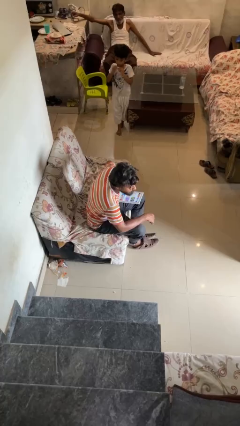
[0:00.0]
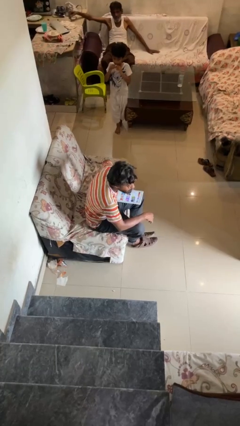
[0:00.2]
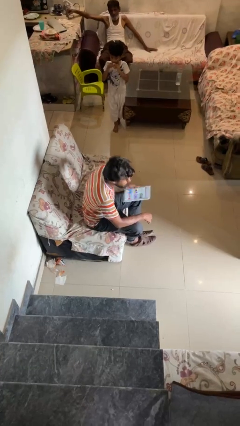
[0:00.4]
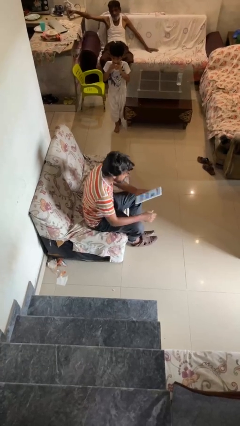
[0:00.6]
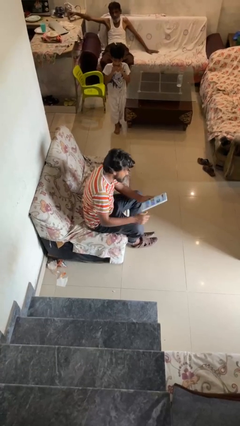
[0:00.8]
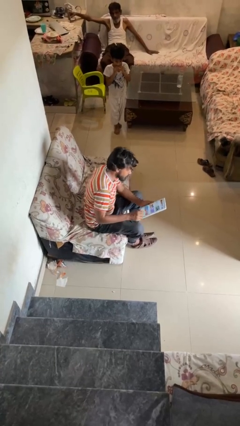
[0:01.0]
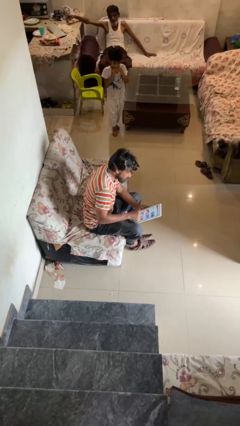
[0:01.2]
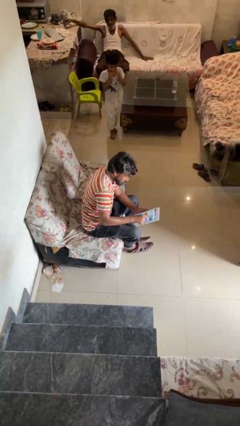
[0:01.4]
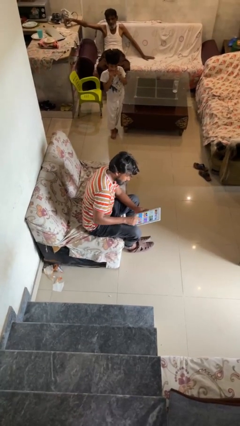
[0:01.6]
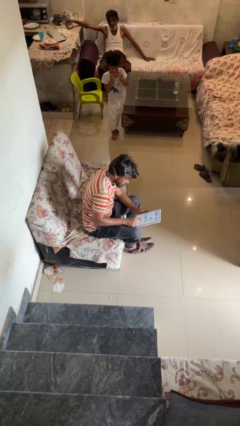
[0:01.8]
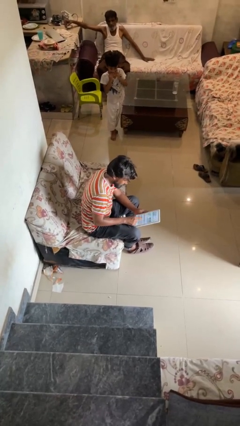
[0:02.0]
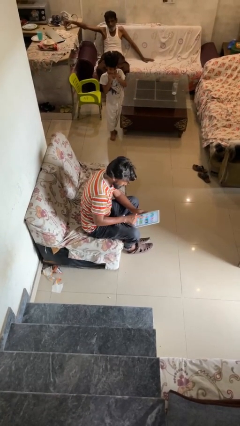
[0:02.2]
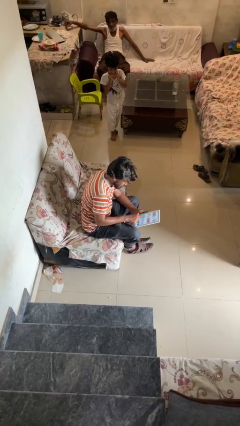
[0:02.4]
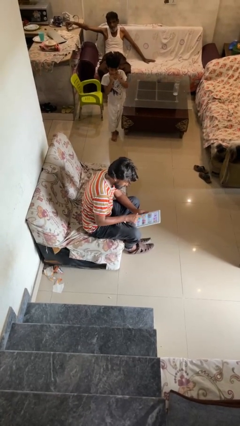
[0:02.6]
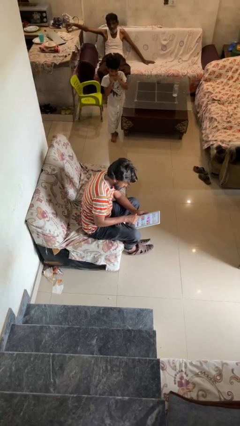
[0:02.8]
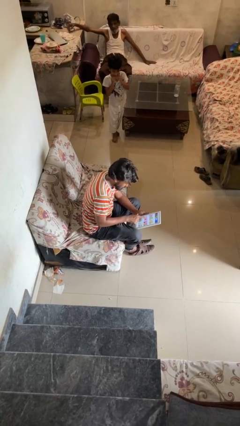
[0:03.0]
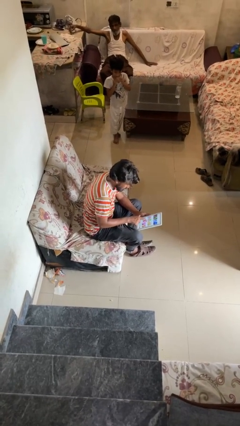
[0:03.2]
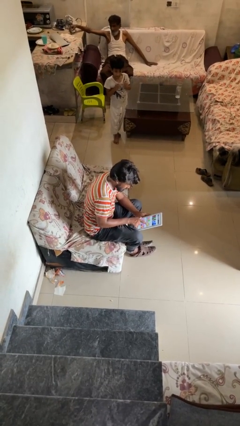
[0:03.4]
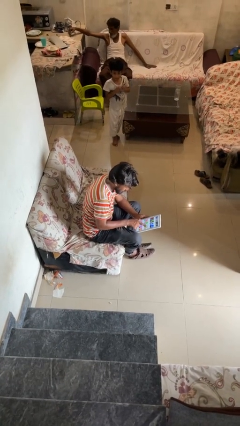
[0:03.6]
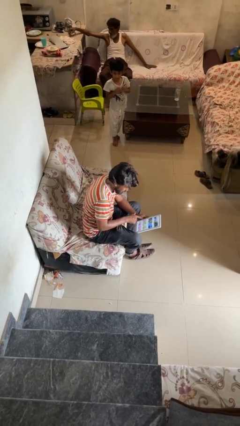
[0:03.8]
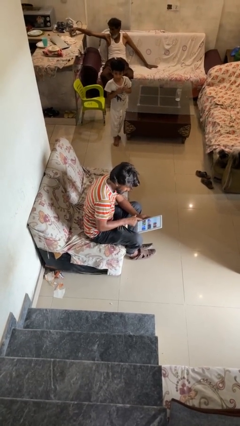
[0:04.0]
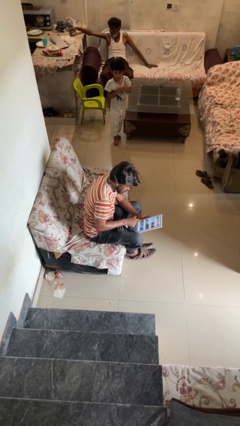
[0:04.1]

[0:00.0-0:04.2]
person interacts with tablet

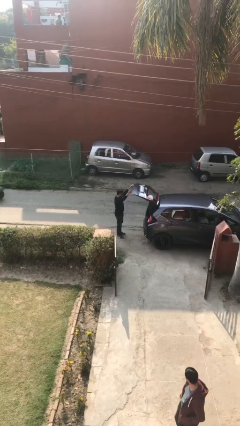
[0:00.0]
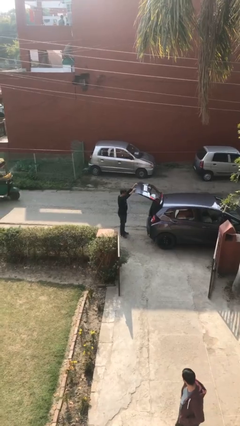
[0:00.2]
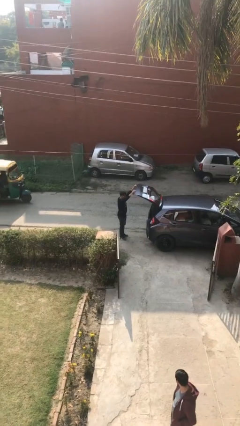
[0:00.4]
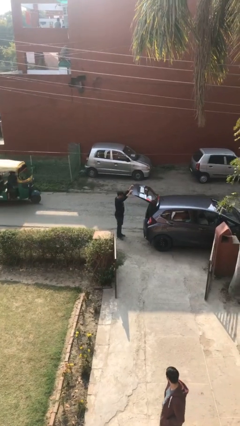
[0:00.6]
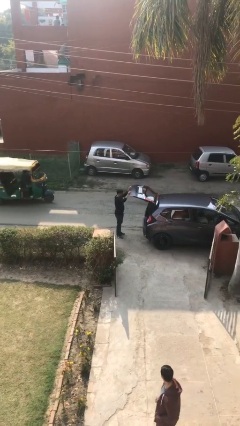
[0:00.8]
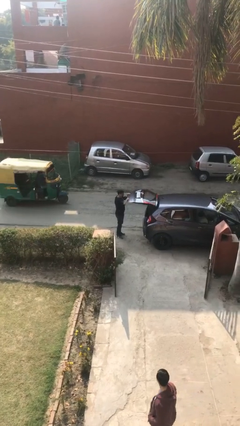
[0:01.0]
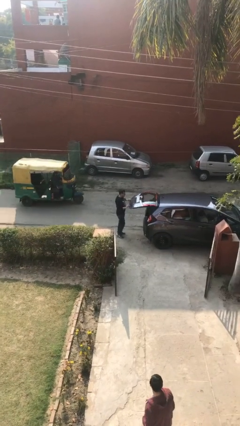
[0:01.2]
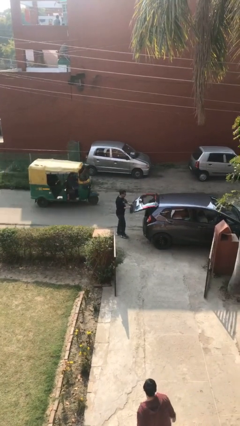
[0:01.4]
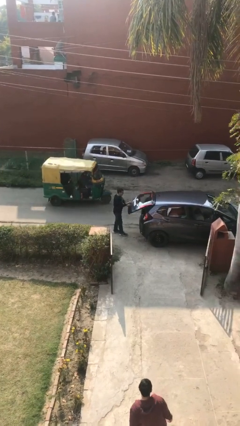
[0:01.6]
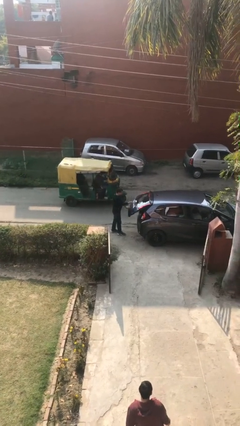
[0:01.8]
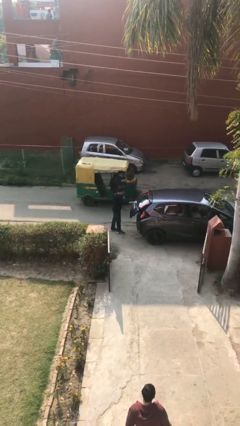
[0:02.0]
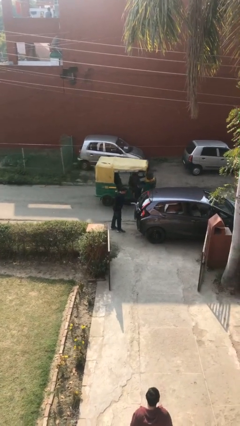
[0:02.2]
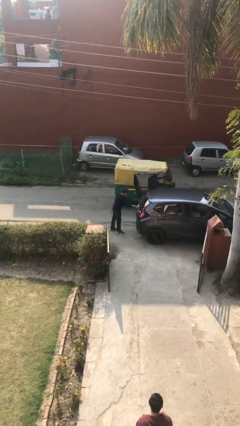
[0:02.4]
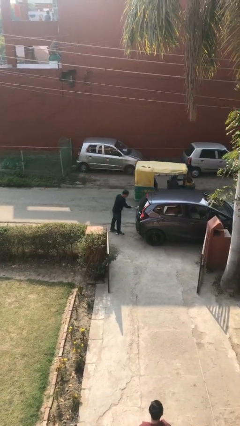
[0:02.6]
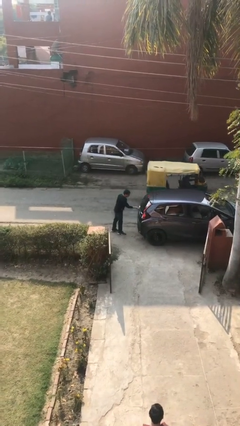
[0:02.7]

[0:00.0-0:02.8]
person closes car trunk

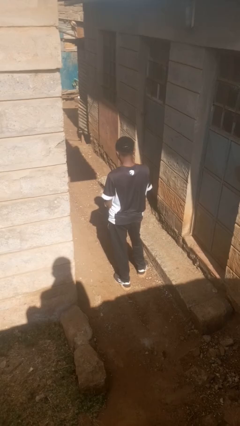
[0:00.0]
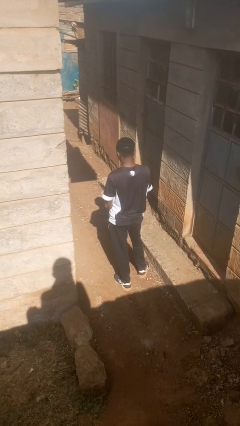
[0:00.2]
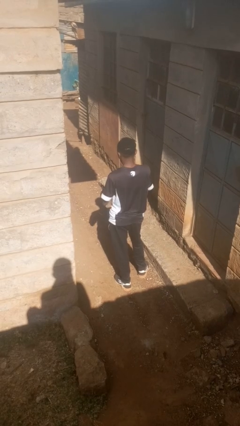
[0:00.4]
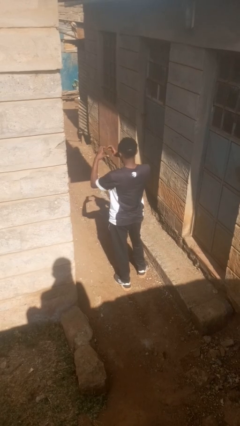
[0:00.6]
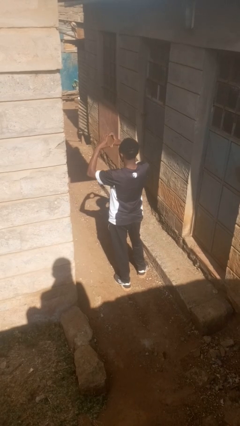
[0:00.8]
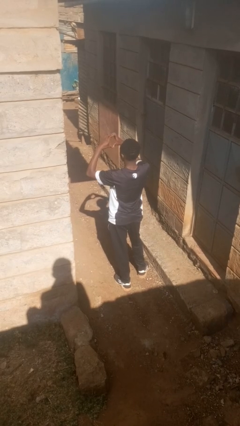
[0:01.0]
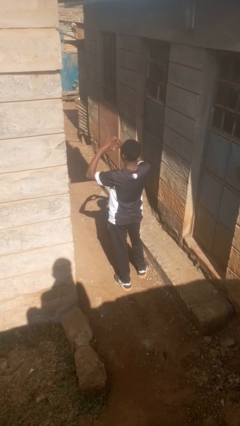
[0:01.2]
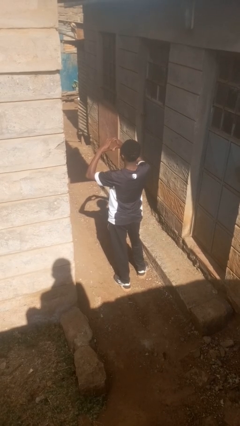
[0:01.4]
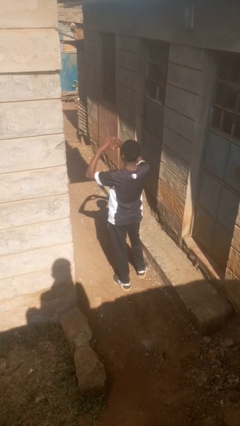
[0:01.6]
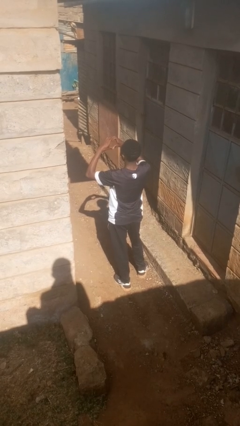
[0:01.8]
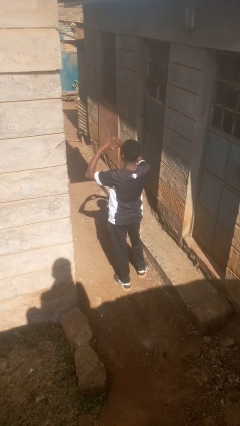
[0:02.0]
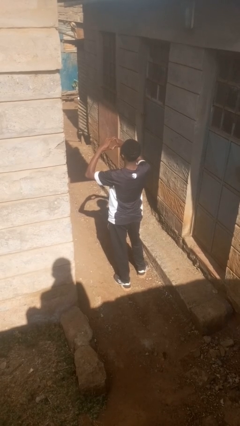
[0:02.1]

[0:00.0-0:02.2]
person gestures heart

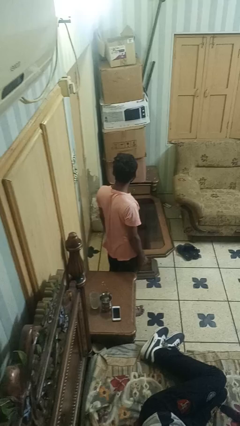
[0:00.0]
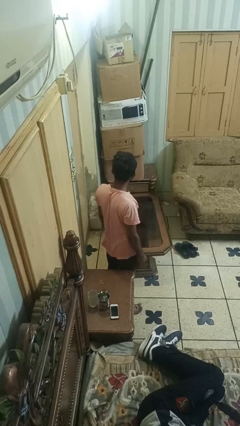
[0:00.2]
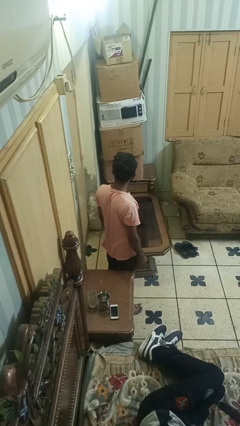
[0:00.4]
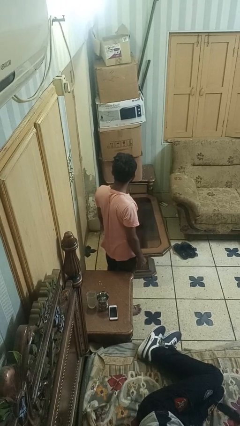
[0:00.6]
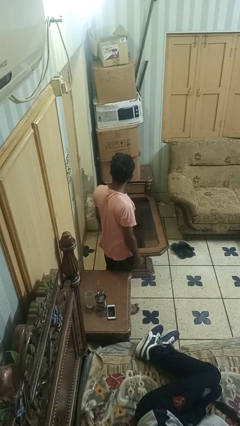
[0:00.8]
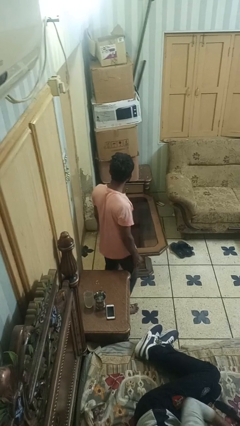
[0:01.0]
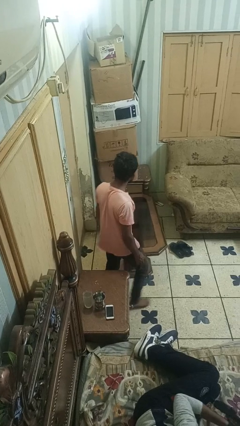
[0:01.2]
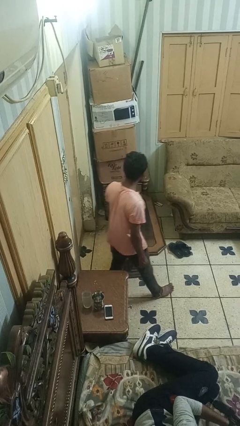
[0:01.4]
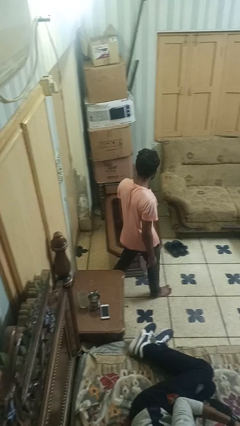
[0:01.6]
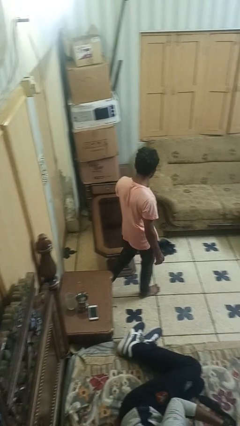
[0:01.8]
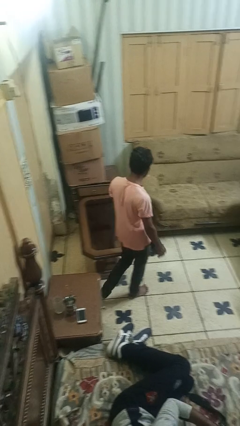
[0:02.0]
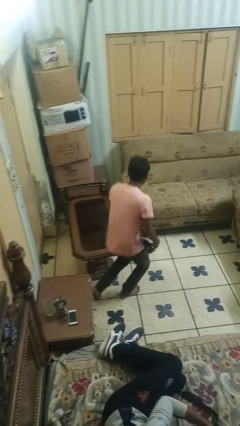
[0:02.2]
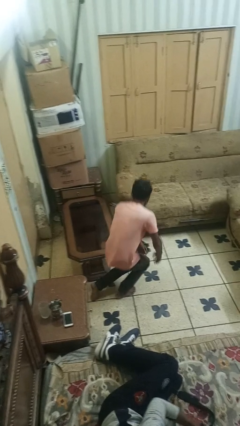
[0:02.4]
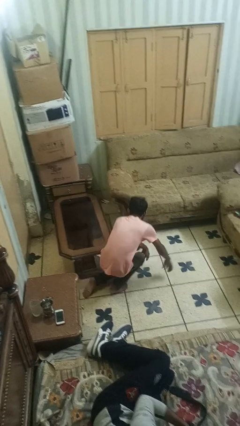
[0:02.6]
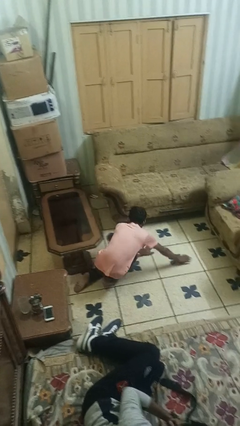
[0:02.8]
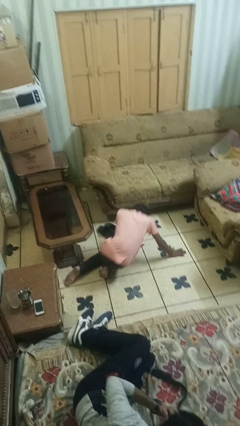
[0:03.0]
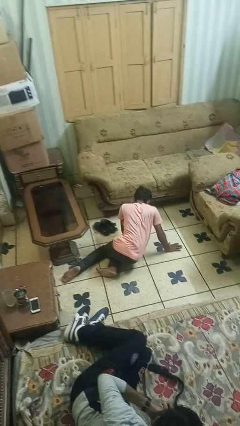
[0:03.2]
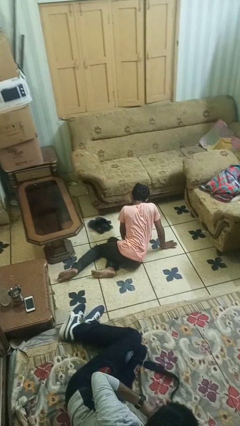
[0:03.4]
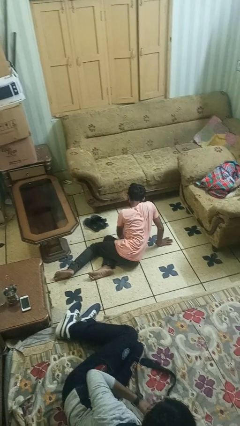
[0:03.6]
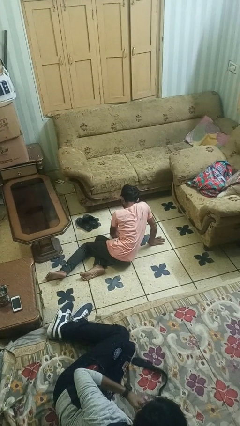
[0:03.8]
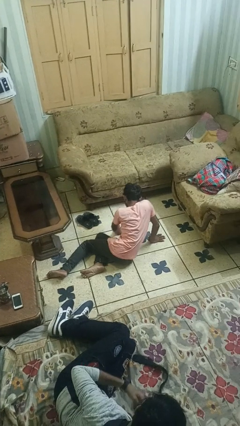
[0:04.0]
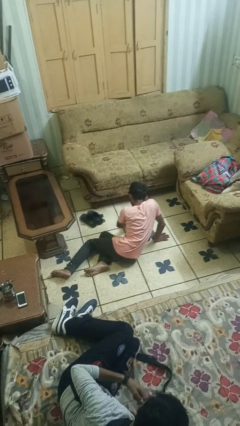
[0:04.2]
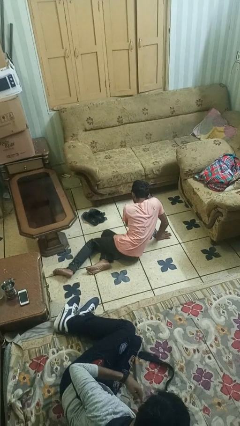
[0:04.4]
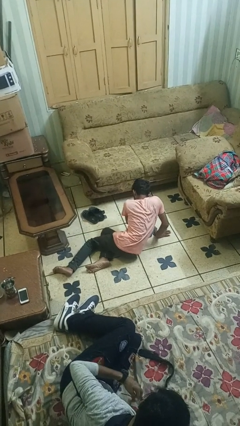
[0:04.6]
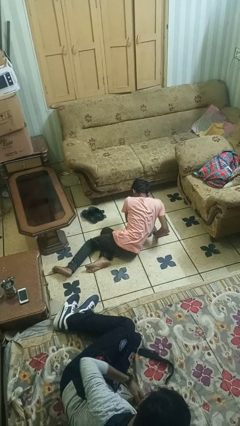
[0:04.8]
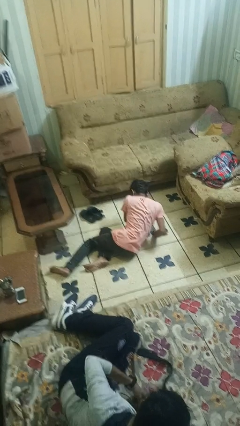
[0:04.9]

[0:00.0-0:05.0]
person trips on object on floor

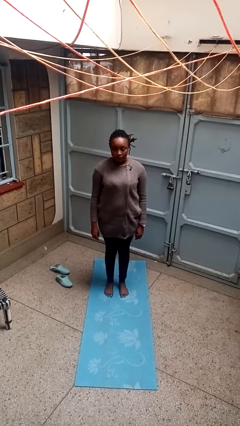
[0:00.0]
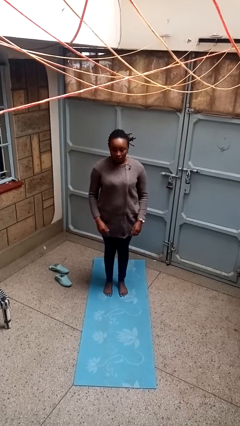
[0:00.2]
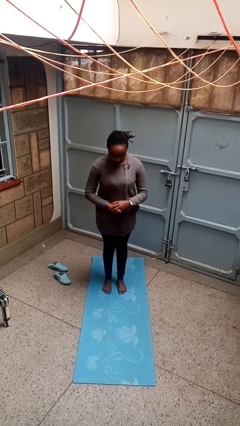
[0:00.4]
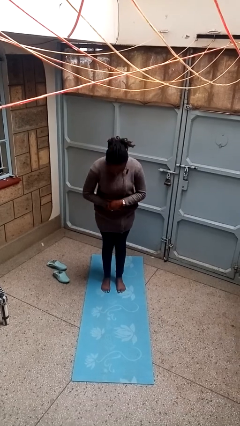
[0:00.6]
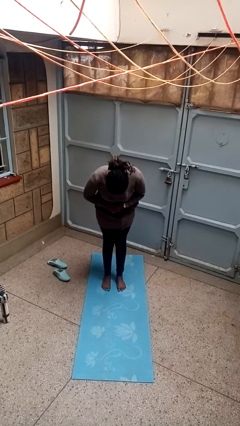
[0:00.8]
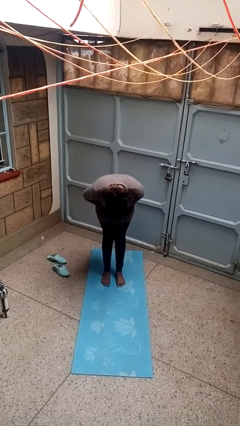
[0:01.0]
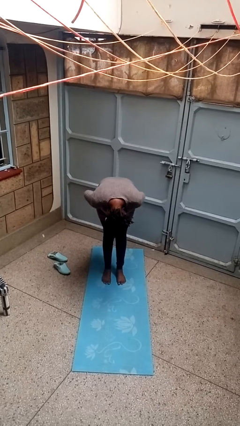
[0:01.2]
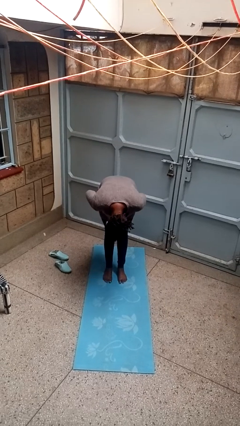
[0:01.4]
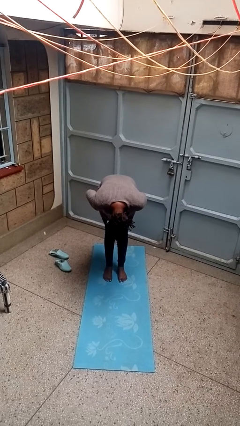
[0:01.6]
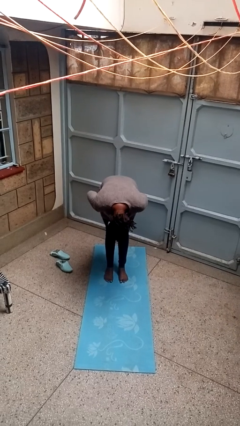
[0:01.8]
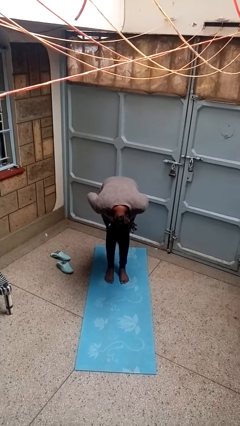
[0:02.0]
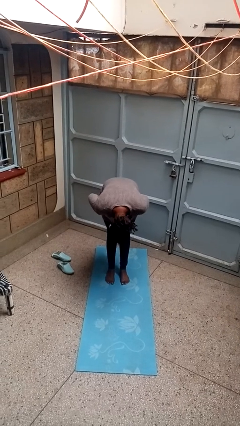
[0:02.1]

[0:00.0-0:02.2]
person bows

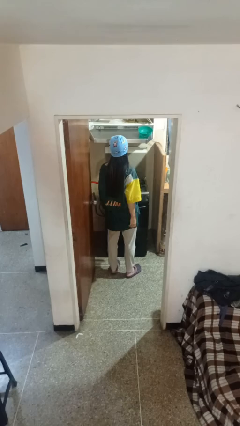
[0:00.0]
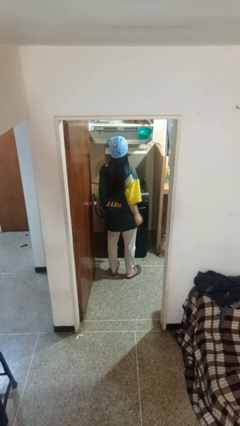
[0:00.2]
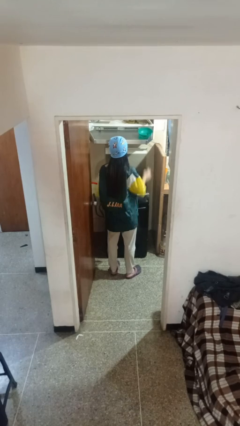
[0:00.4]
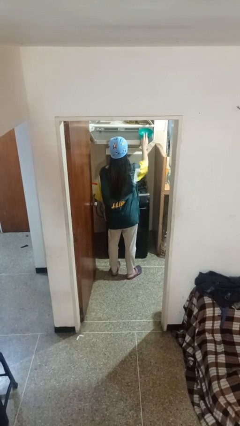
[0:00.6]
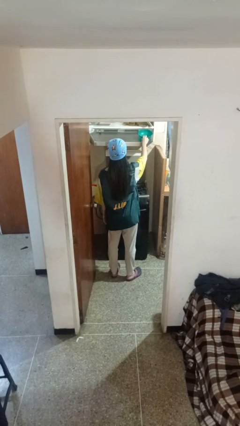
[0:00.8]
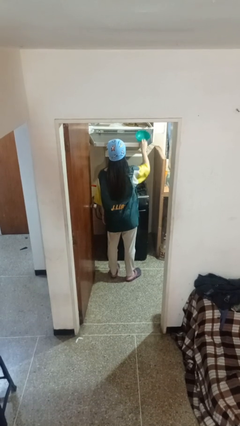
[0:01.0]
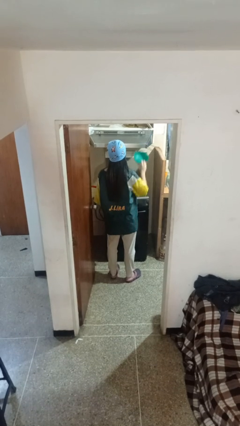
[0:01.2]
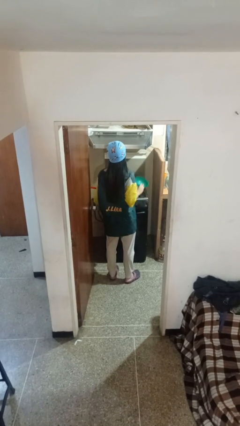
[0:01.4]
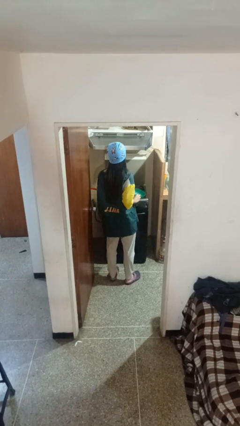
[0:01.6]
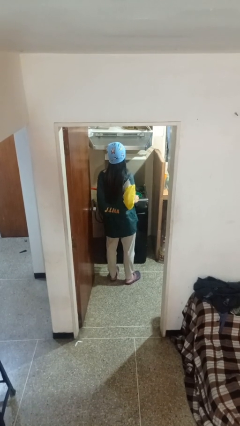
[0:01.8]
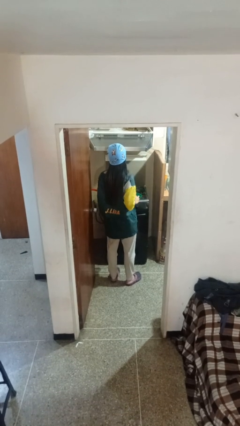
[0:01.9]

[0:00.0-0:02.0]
person picks up object from countertop
